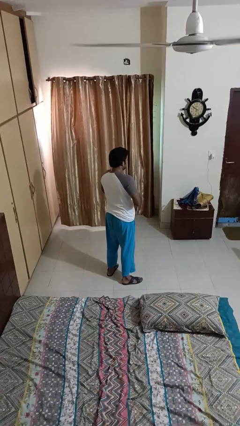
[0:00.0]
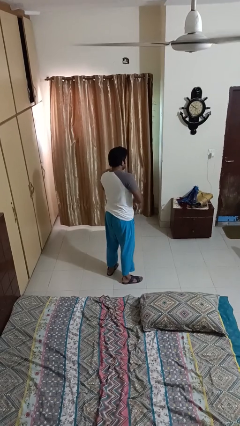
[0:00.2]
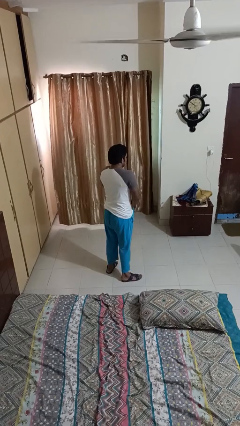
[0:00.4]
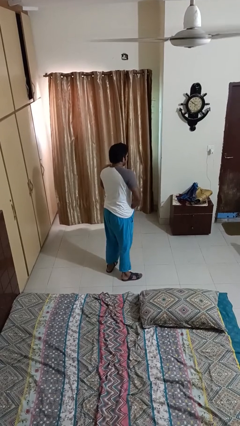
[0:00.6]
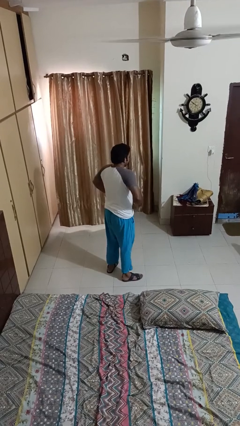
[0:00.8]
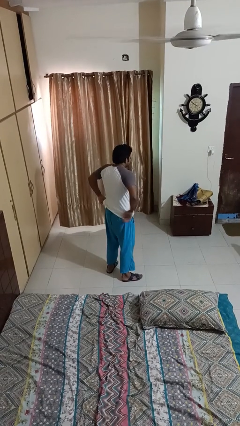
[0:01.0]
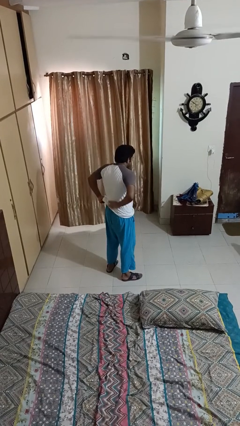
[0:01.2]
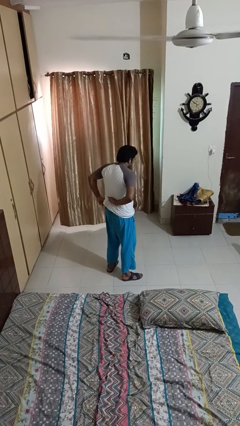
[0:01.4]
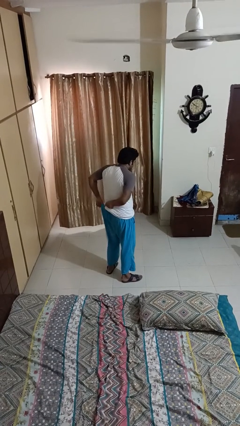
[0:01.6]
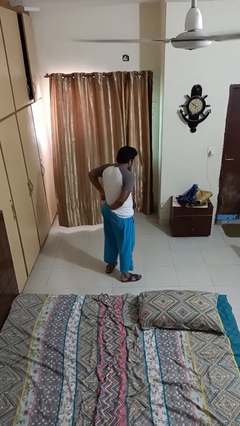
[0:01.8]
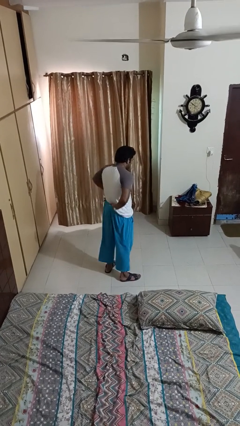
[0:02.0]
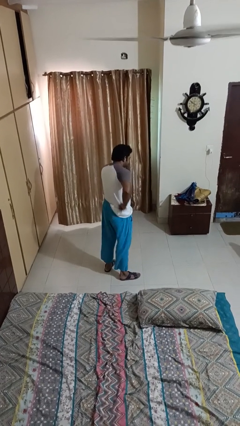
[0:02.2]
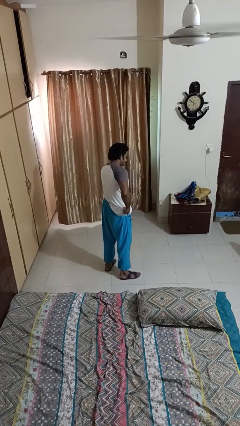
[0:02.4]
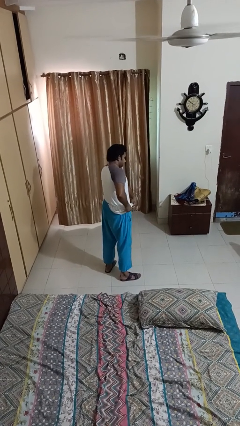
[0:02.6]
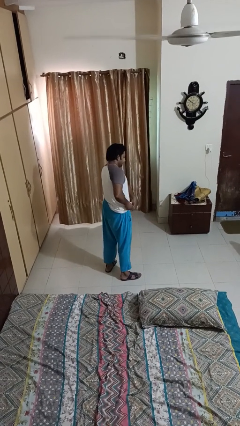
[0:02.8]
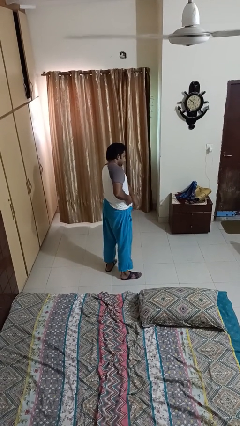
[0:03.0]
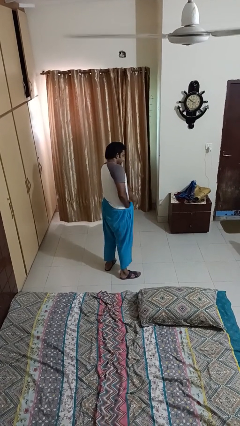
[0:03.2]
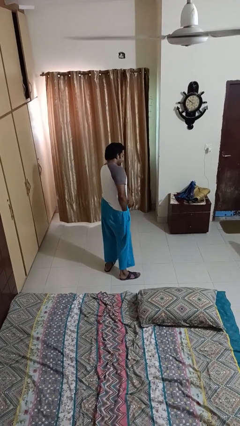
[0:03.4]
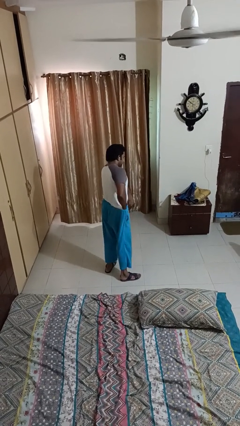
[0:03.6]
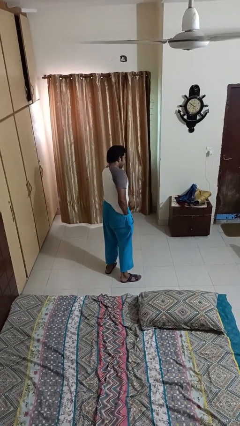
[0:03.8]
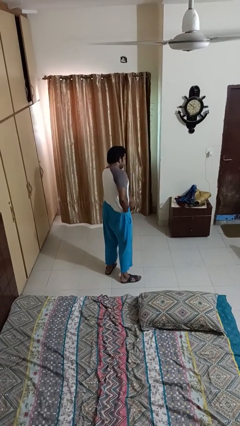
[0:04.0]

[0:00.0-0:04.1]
person tucks in shirt

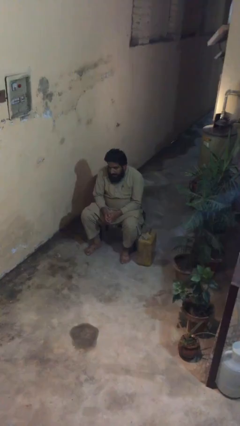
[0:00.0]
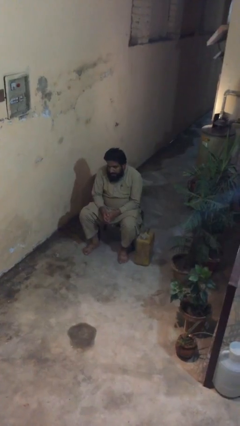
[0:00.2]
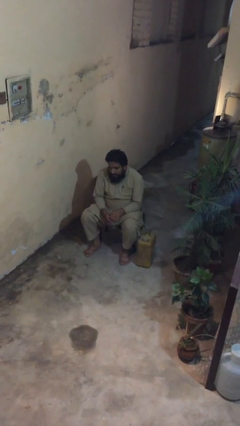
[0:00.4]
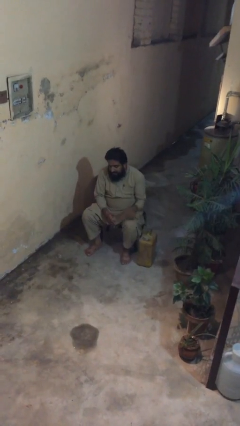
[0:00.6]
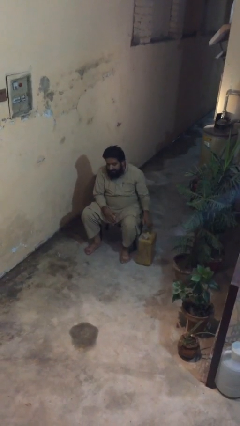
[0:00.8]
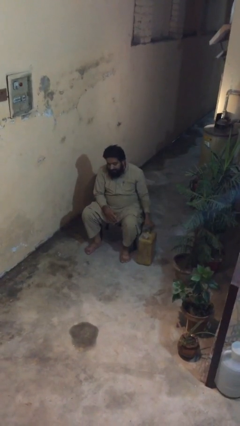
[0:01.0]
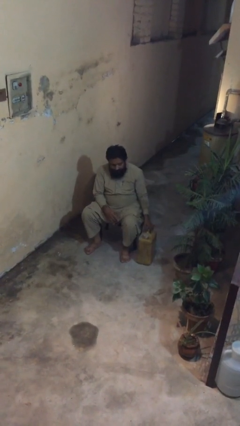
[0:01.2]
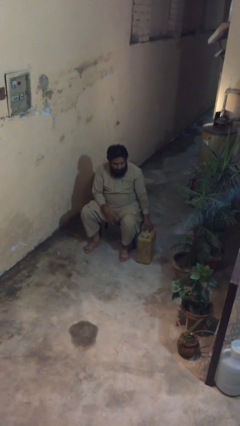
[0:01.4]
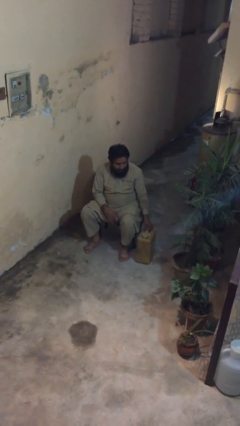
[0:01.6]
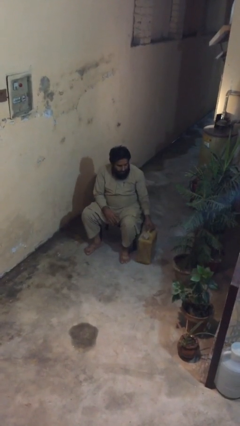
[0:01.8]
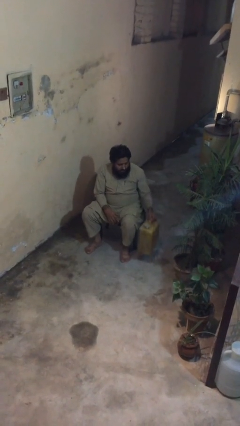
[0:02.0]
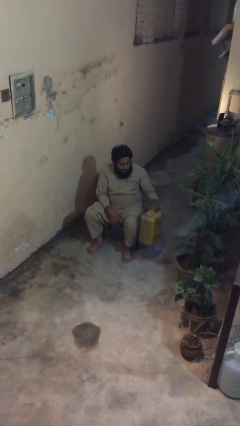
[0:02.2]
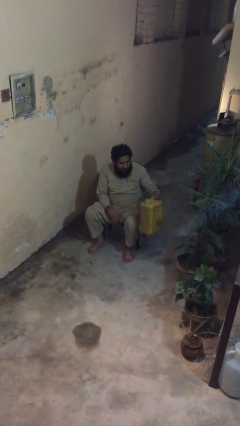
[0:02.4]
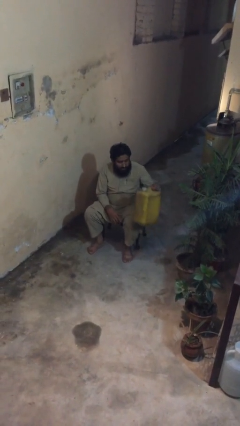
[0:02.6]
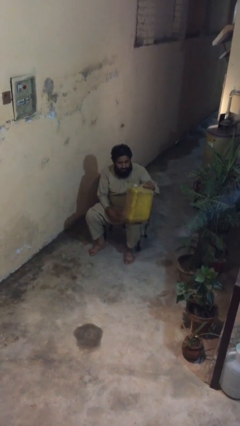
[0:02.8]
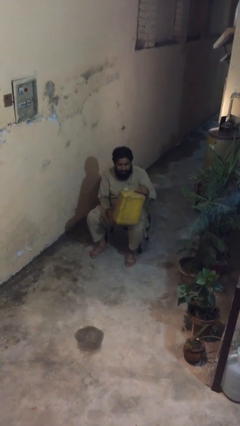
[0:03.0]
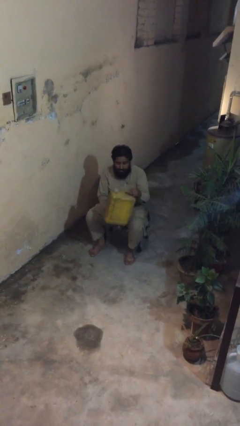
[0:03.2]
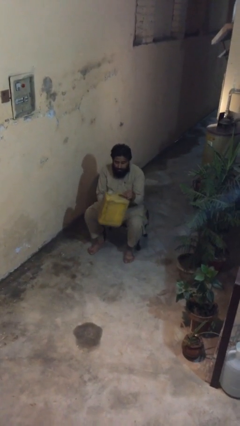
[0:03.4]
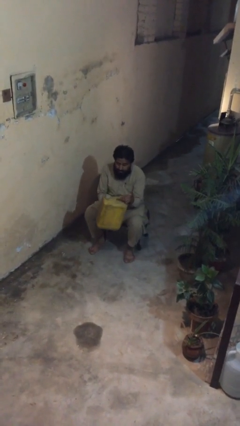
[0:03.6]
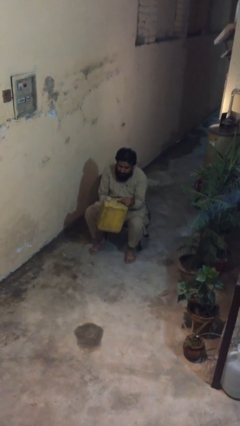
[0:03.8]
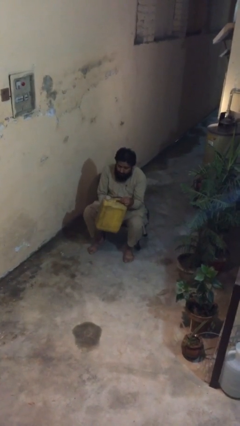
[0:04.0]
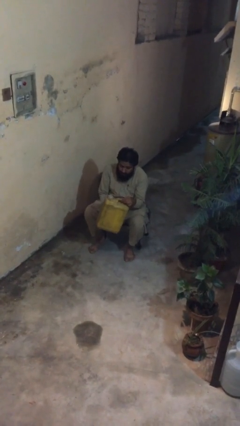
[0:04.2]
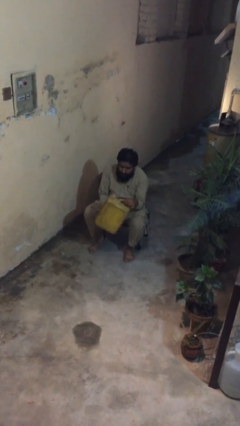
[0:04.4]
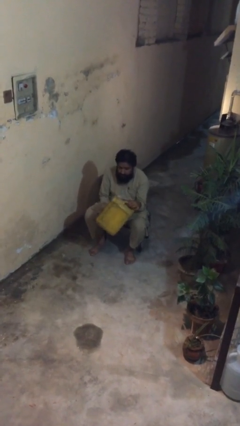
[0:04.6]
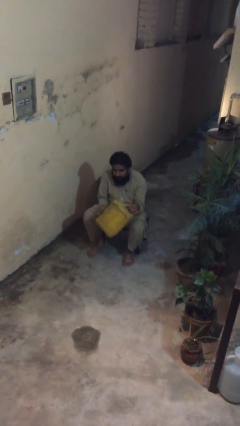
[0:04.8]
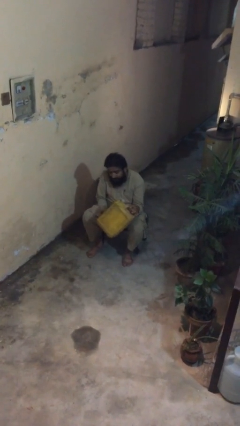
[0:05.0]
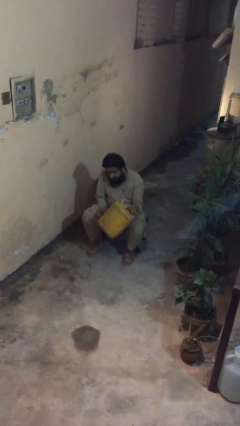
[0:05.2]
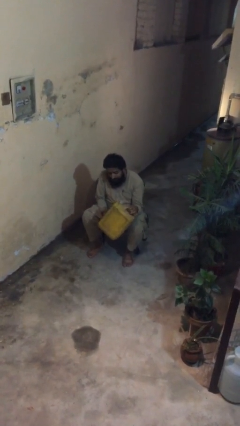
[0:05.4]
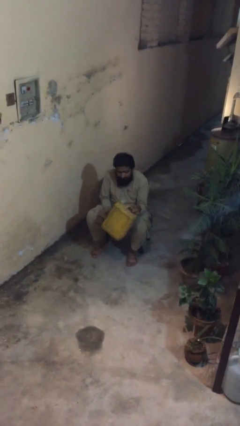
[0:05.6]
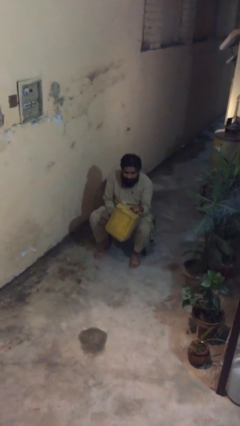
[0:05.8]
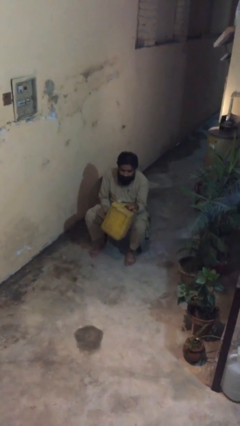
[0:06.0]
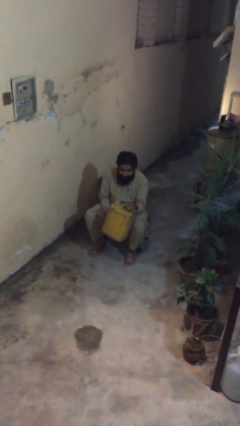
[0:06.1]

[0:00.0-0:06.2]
person picks up object from floor

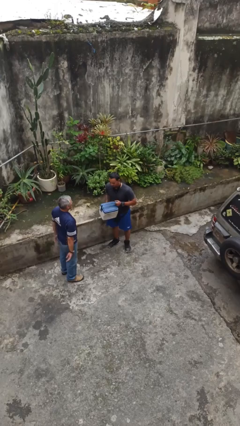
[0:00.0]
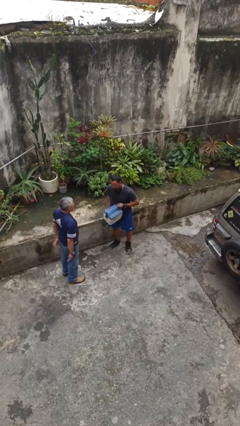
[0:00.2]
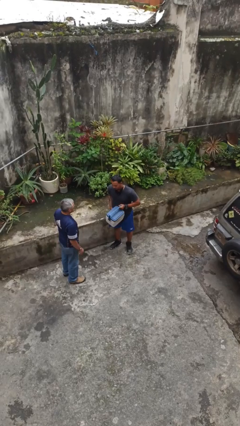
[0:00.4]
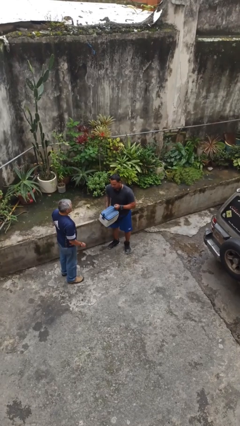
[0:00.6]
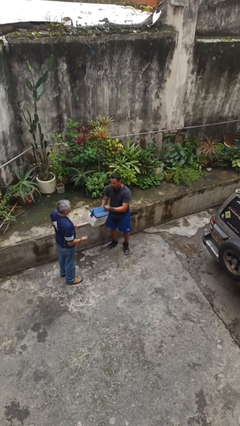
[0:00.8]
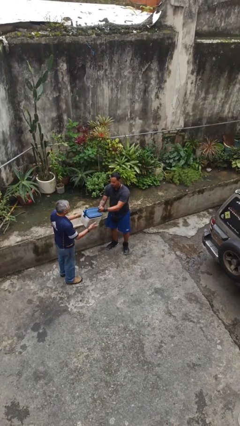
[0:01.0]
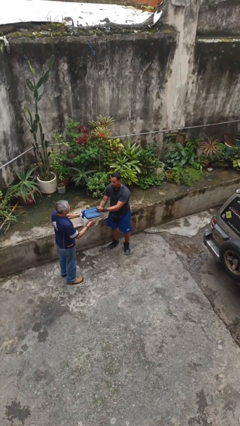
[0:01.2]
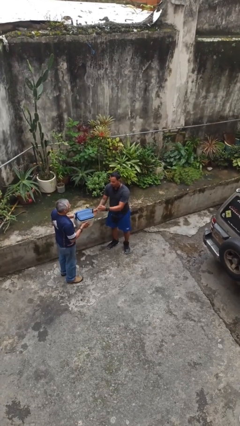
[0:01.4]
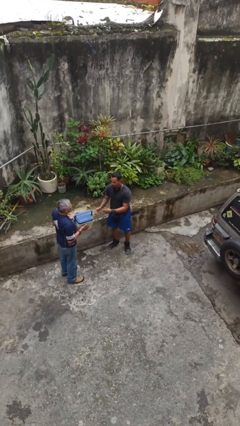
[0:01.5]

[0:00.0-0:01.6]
person transfers object to person

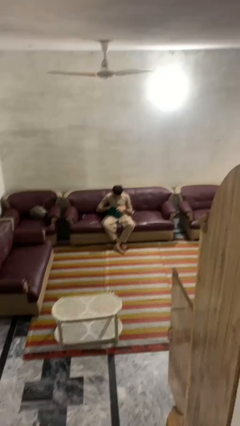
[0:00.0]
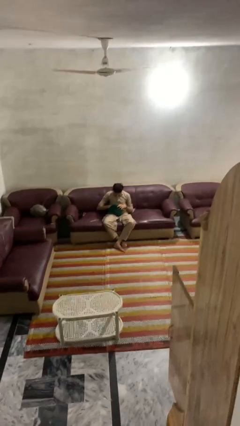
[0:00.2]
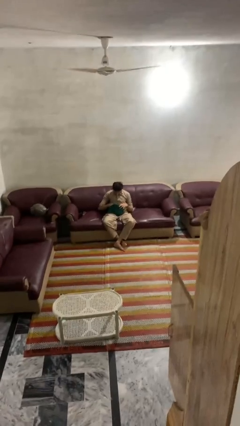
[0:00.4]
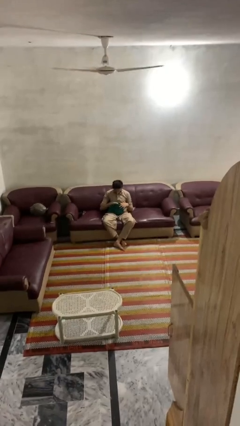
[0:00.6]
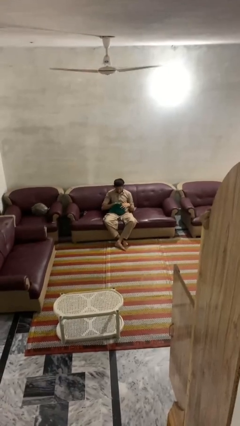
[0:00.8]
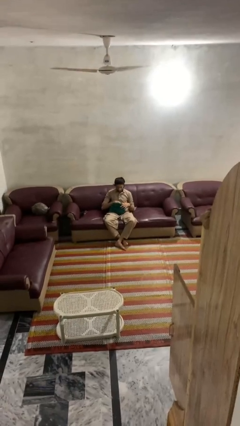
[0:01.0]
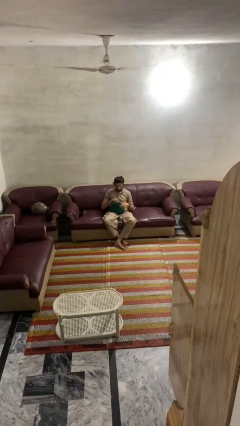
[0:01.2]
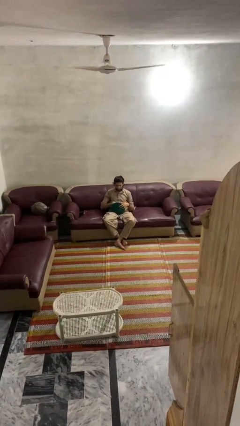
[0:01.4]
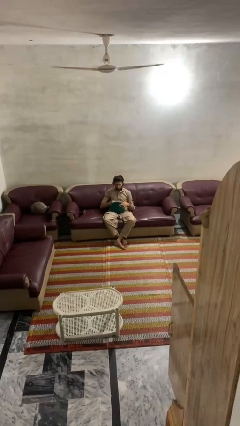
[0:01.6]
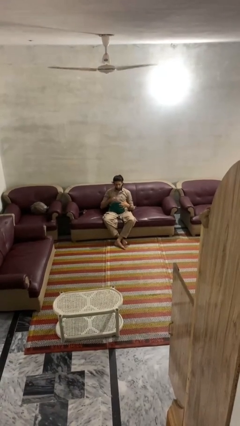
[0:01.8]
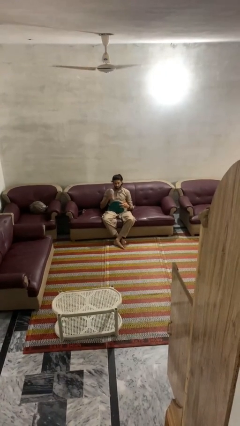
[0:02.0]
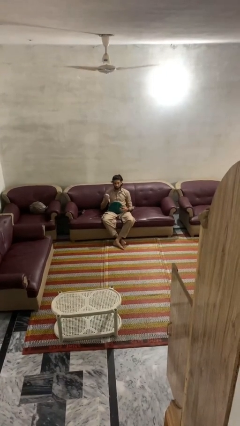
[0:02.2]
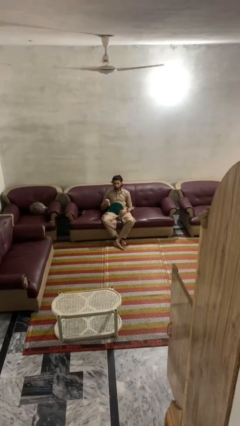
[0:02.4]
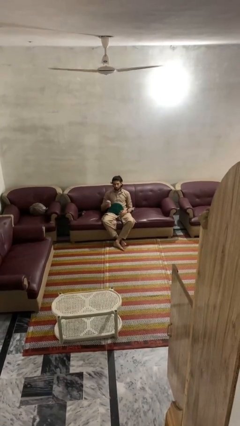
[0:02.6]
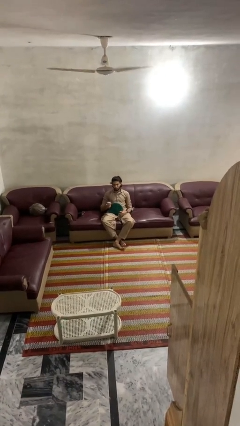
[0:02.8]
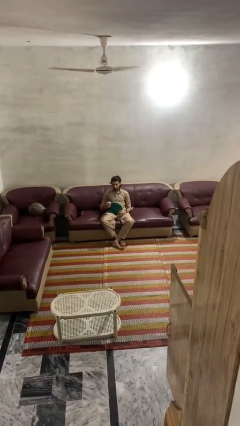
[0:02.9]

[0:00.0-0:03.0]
person takes object from purse

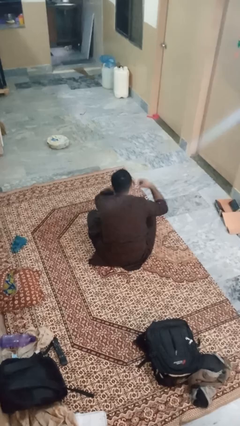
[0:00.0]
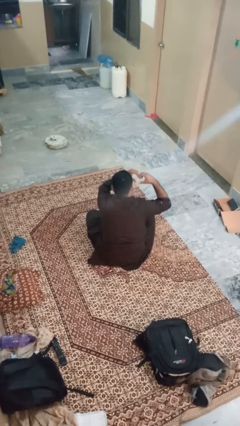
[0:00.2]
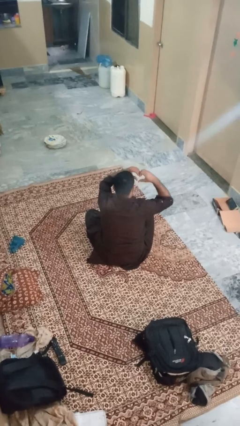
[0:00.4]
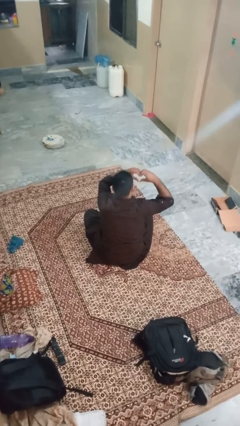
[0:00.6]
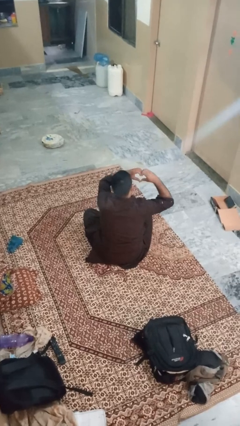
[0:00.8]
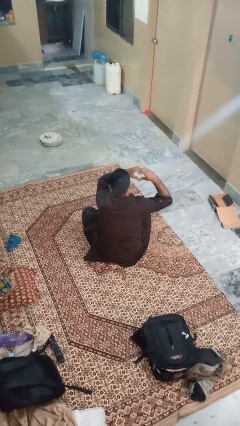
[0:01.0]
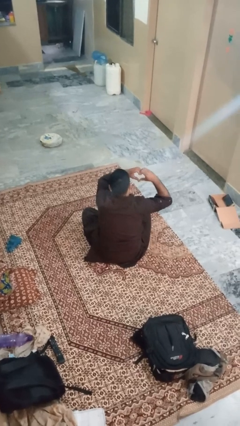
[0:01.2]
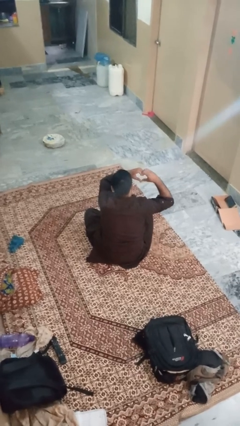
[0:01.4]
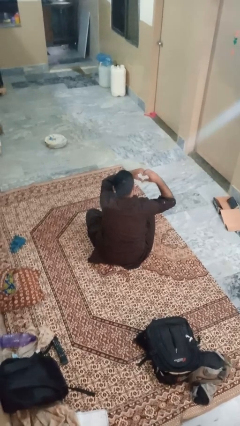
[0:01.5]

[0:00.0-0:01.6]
person gestures heart

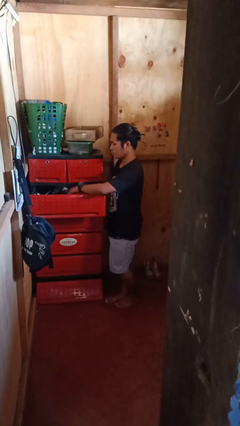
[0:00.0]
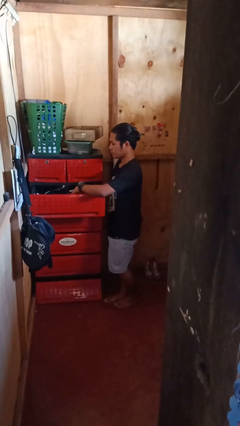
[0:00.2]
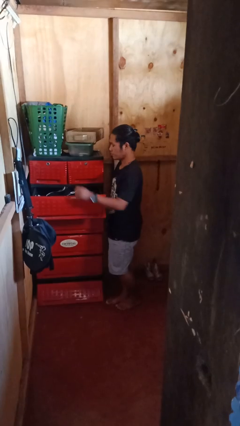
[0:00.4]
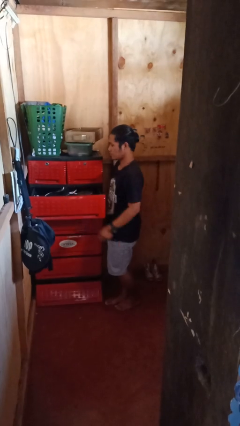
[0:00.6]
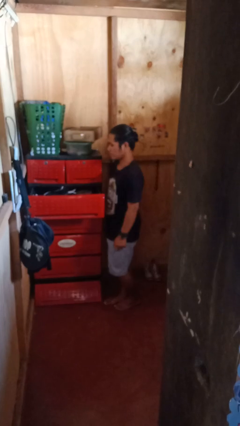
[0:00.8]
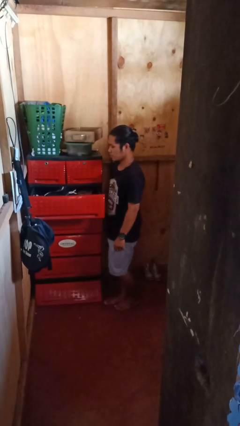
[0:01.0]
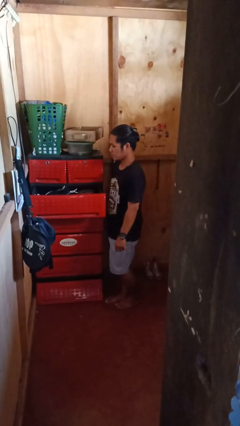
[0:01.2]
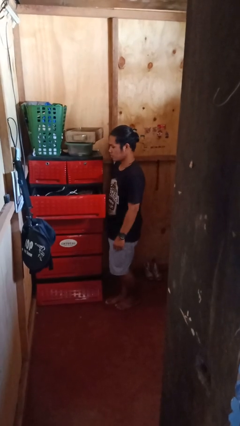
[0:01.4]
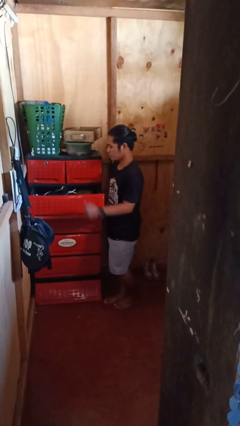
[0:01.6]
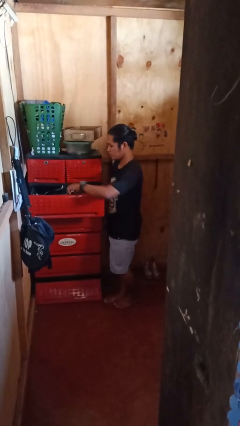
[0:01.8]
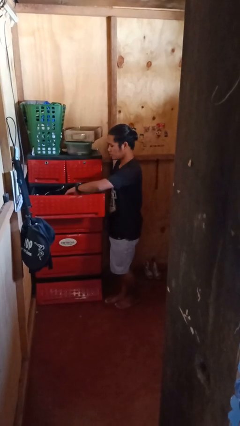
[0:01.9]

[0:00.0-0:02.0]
person puts clothes into dresser
